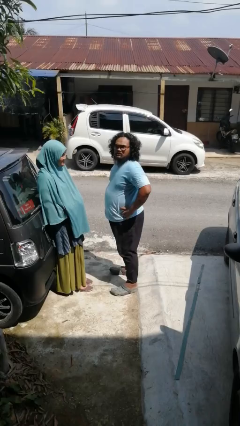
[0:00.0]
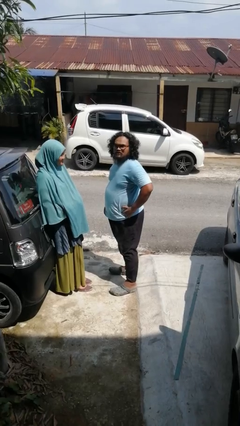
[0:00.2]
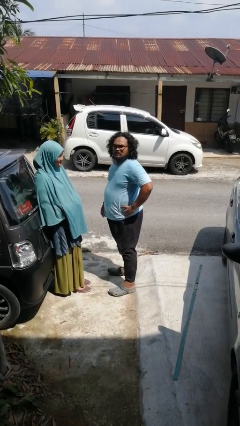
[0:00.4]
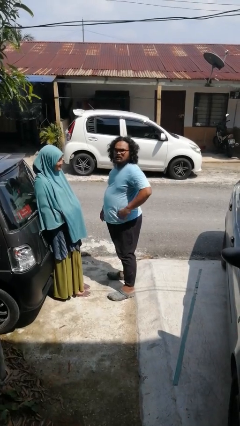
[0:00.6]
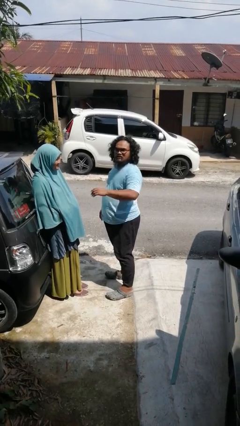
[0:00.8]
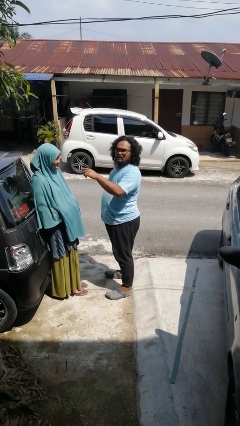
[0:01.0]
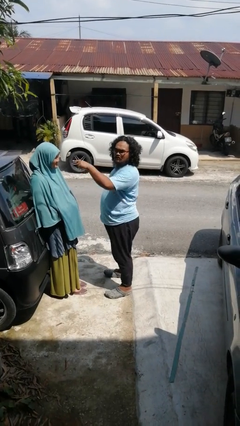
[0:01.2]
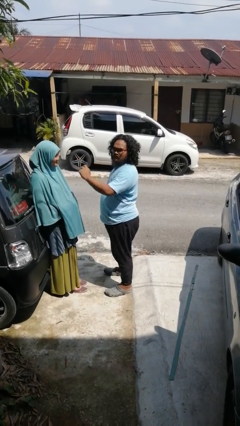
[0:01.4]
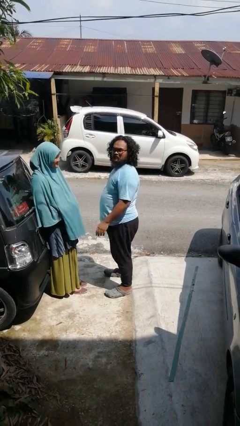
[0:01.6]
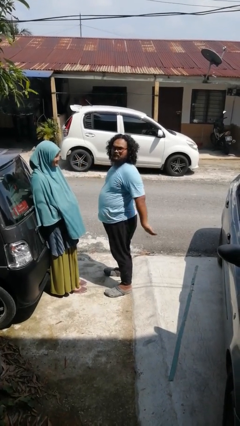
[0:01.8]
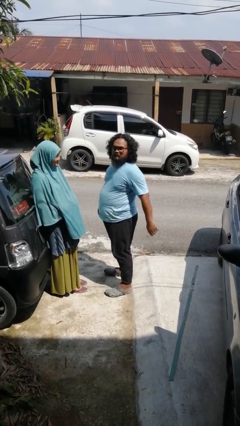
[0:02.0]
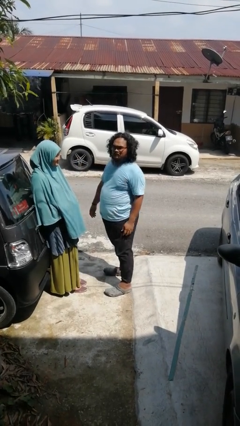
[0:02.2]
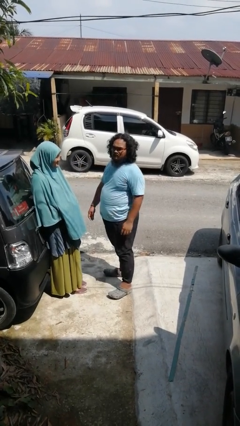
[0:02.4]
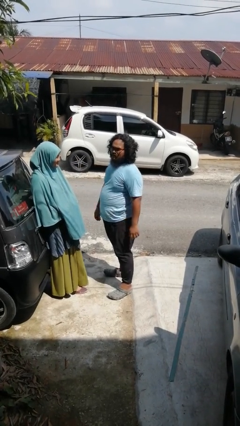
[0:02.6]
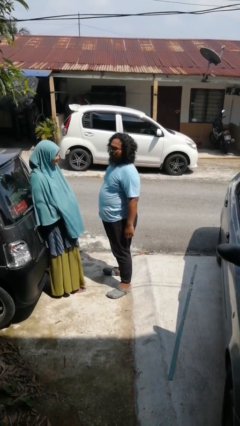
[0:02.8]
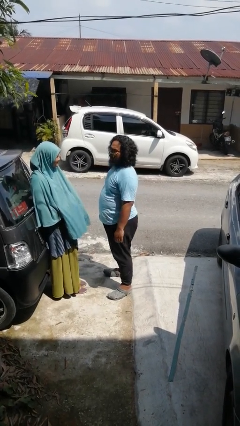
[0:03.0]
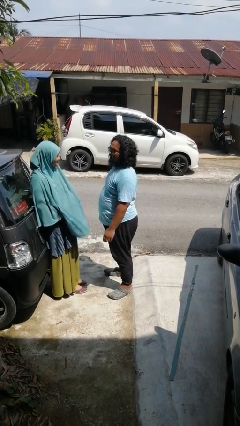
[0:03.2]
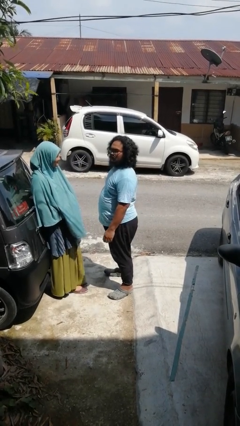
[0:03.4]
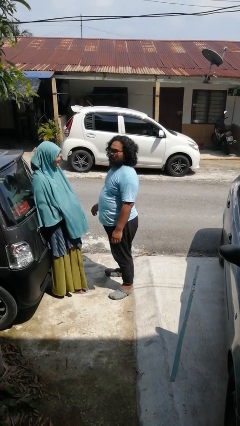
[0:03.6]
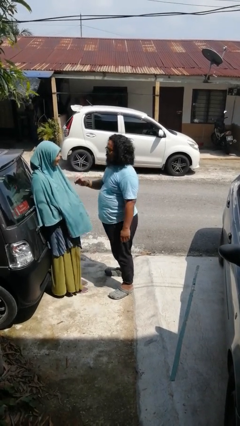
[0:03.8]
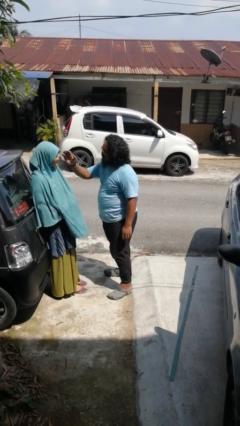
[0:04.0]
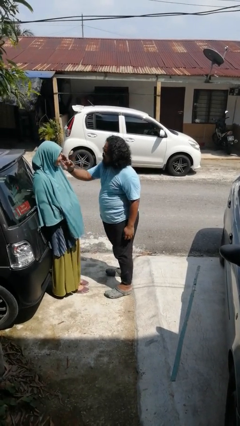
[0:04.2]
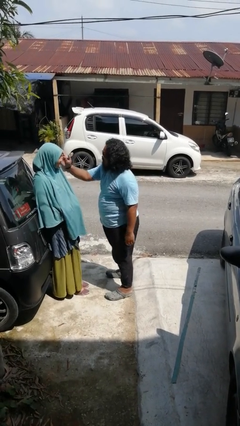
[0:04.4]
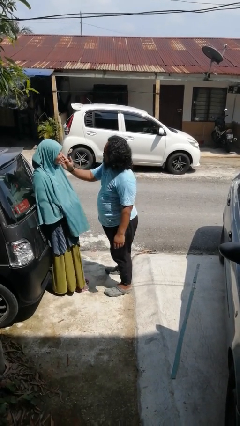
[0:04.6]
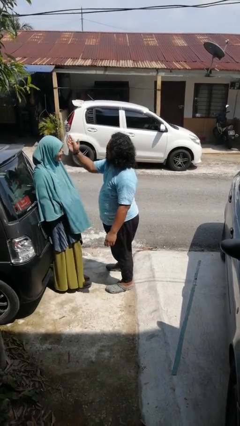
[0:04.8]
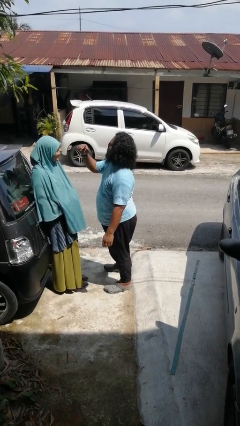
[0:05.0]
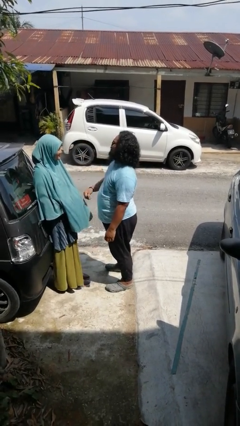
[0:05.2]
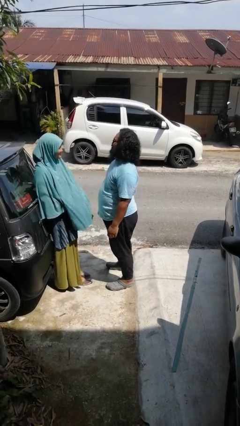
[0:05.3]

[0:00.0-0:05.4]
person touches face of person

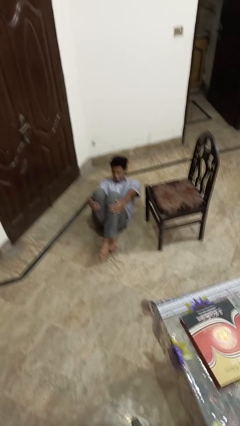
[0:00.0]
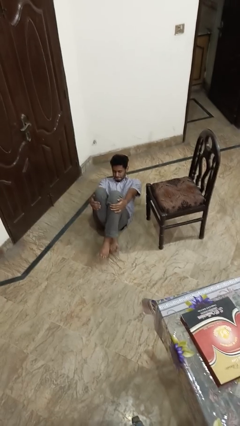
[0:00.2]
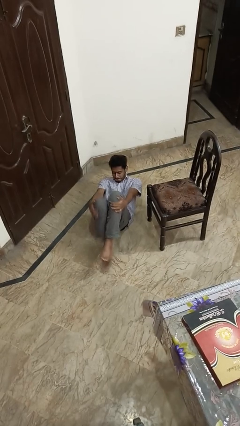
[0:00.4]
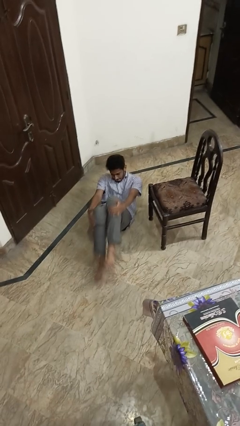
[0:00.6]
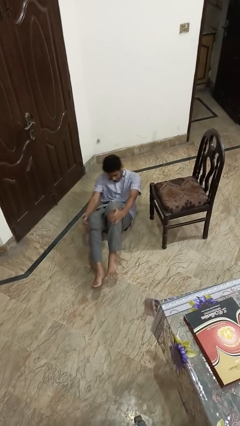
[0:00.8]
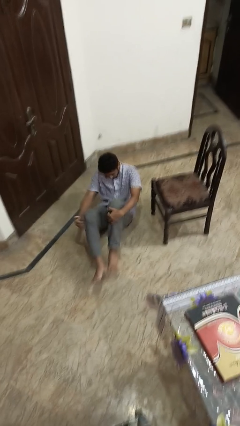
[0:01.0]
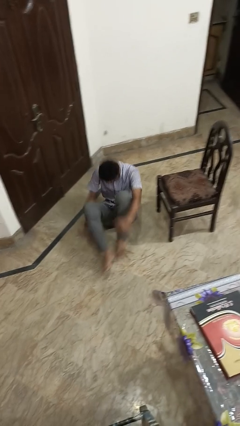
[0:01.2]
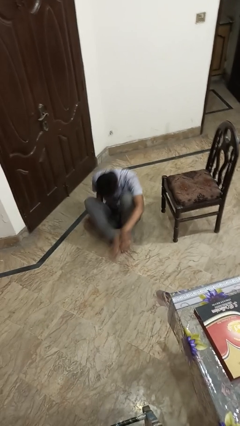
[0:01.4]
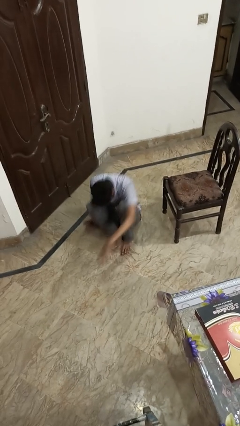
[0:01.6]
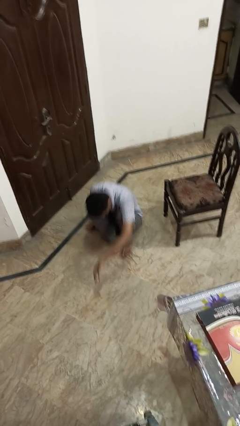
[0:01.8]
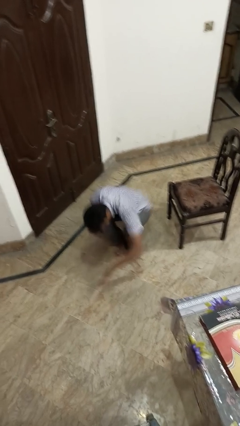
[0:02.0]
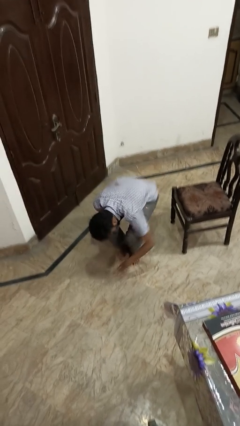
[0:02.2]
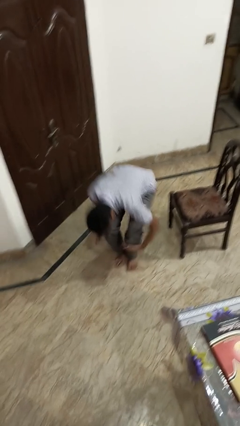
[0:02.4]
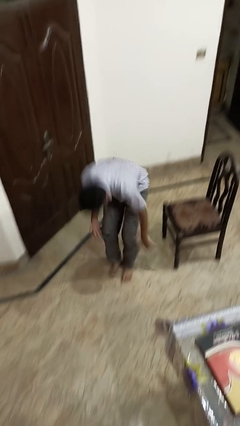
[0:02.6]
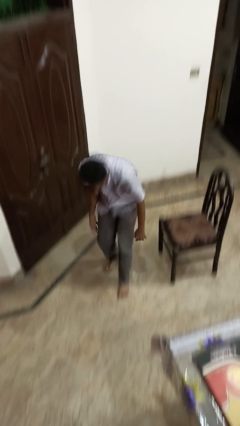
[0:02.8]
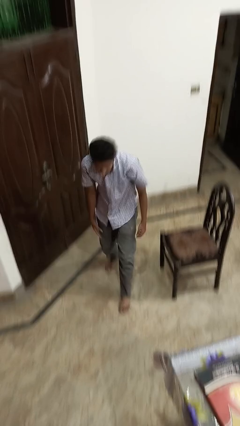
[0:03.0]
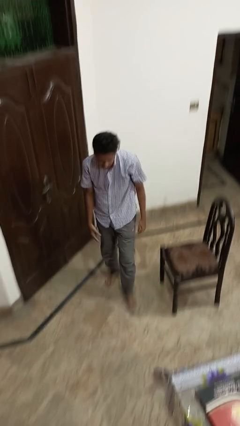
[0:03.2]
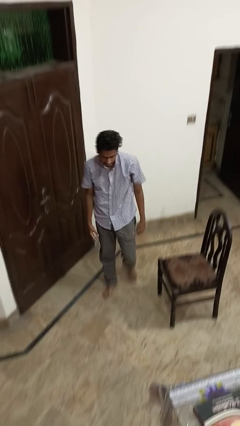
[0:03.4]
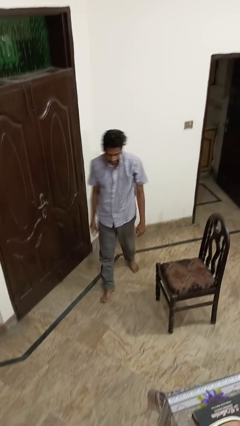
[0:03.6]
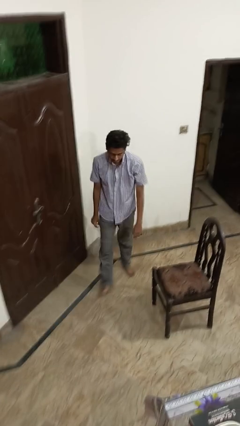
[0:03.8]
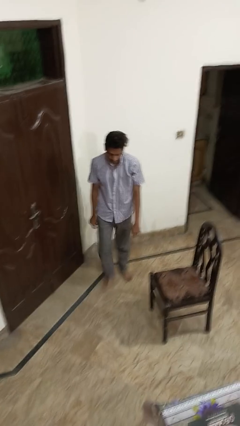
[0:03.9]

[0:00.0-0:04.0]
person stands up from floor

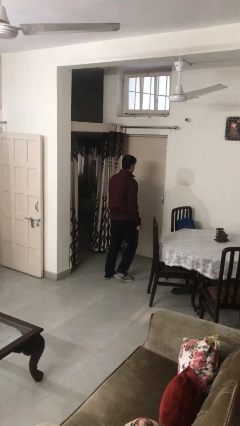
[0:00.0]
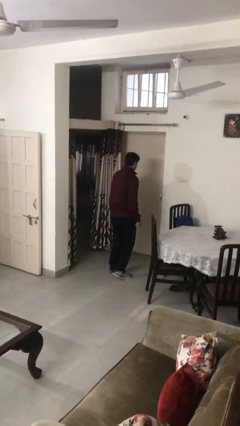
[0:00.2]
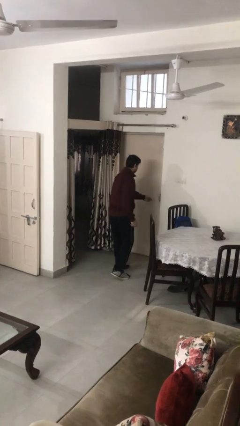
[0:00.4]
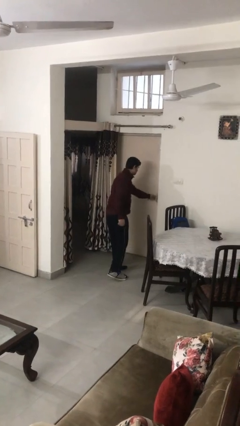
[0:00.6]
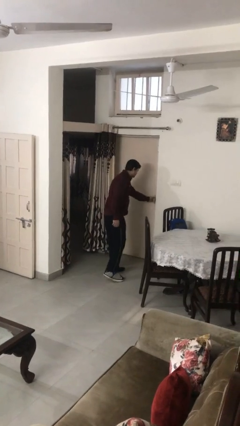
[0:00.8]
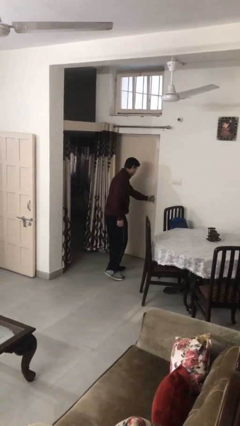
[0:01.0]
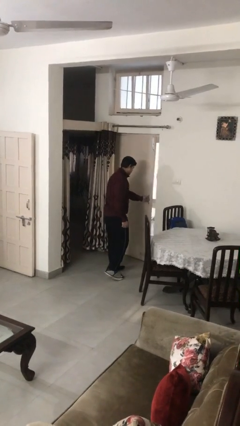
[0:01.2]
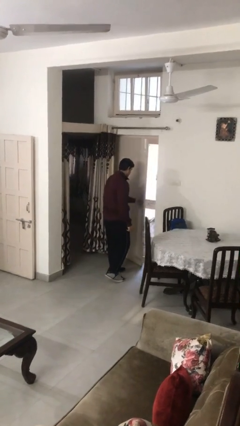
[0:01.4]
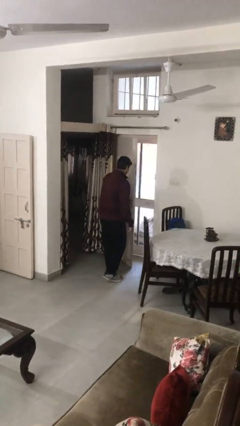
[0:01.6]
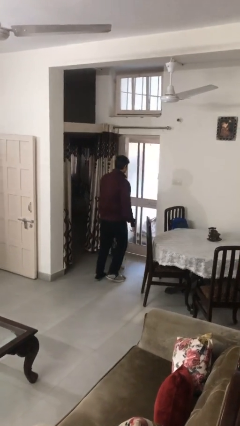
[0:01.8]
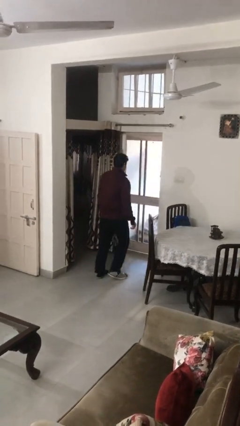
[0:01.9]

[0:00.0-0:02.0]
person opens facility door

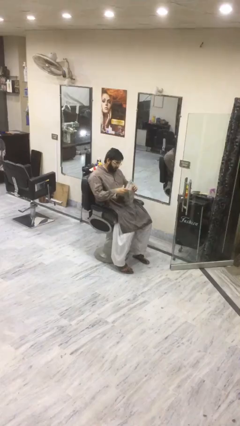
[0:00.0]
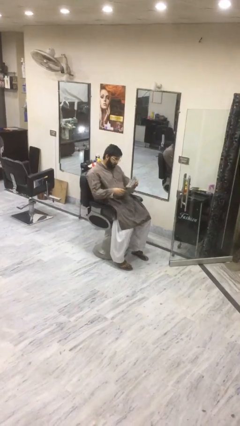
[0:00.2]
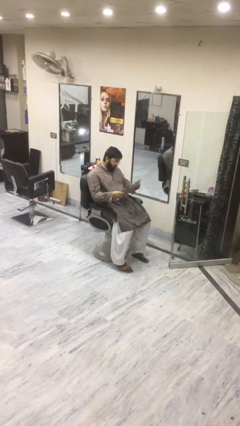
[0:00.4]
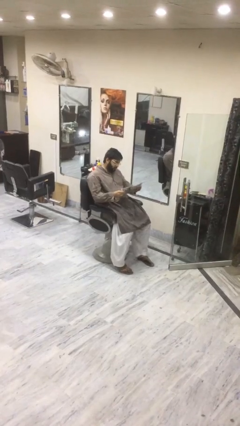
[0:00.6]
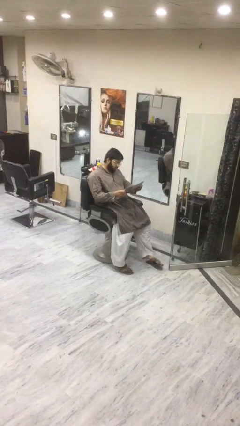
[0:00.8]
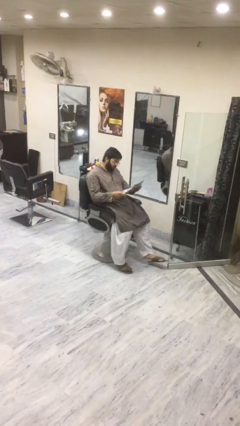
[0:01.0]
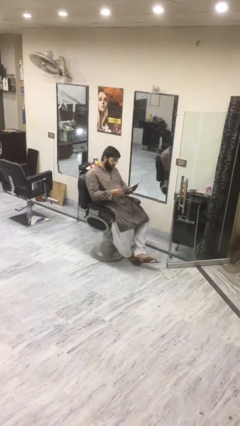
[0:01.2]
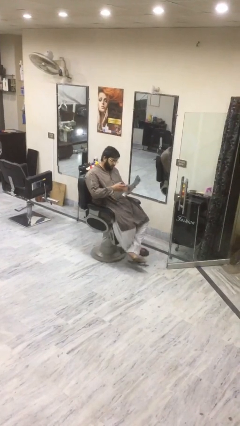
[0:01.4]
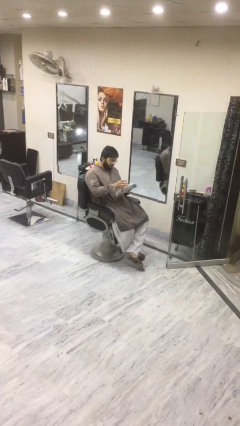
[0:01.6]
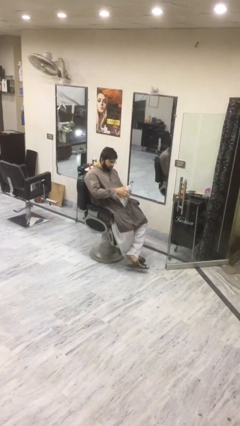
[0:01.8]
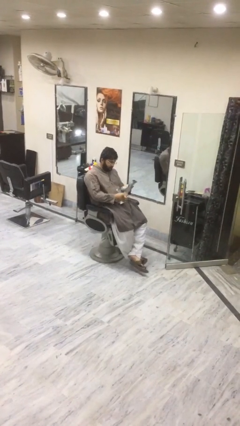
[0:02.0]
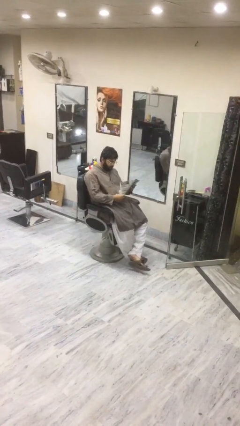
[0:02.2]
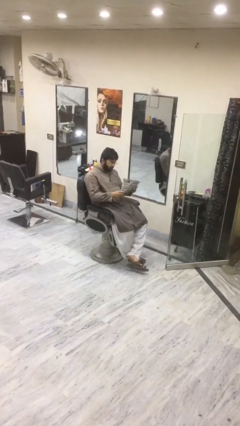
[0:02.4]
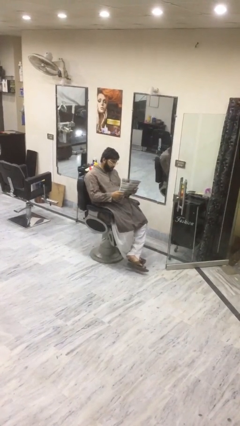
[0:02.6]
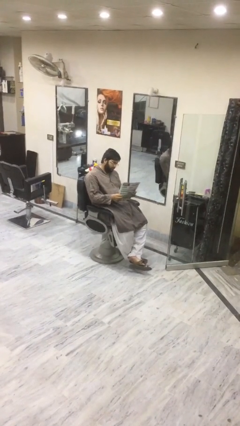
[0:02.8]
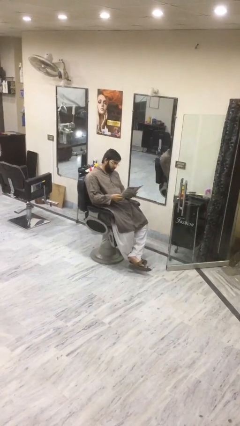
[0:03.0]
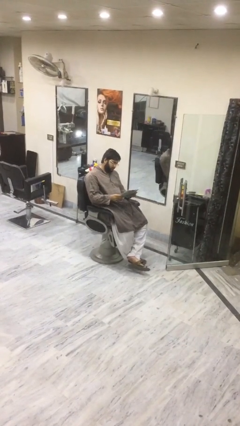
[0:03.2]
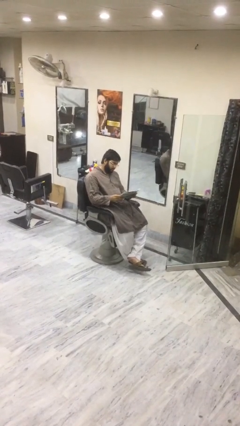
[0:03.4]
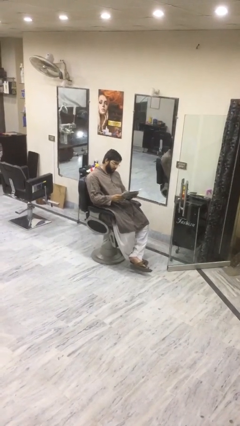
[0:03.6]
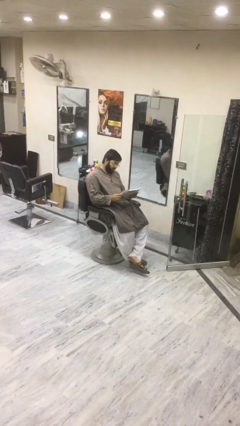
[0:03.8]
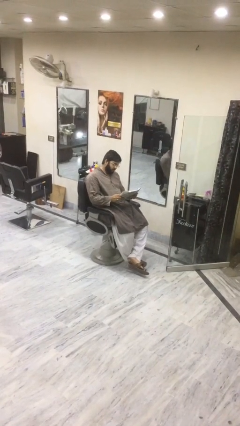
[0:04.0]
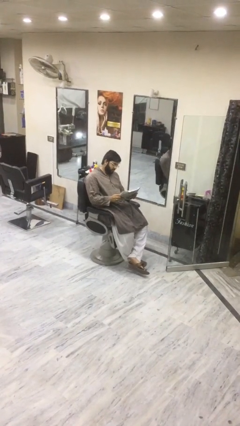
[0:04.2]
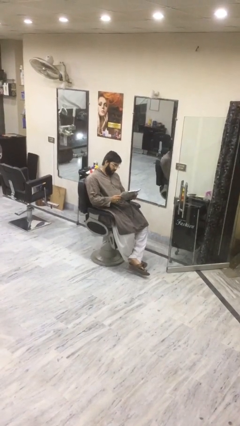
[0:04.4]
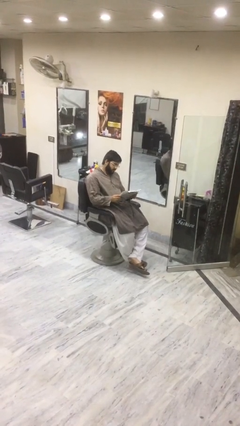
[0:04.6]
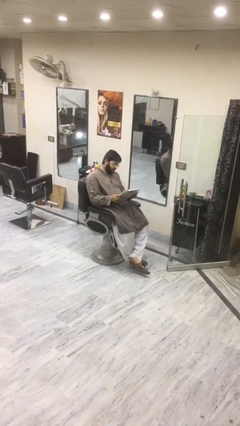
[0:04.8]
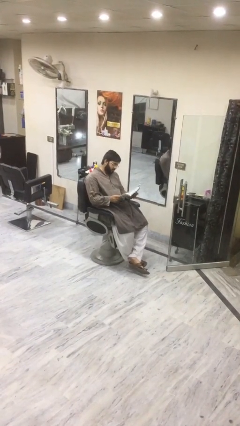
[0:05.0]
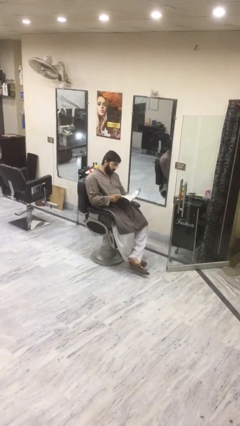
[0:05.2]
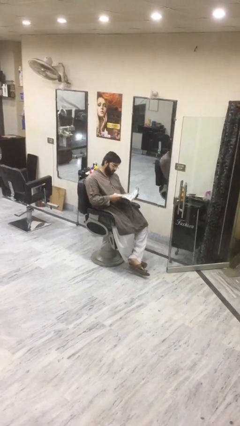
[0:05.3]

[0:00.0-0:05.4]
person reads document

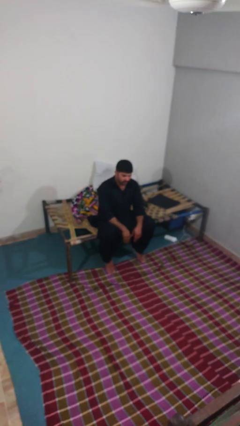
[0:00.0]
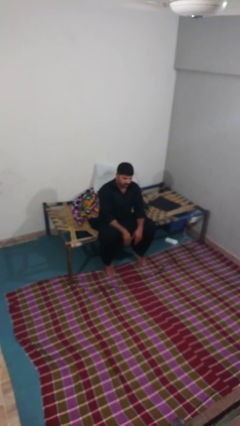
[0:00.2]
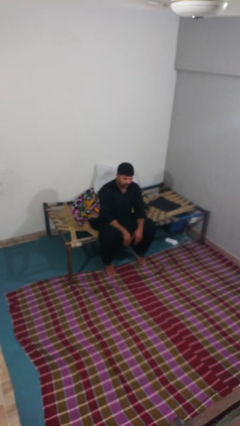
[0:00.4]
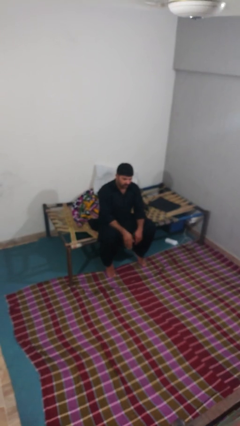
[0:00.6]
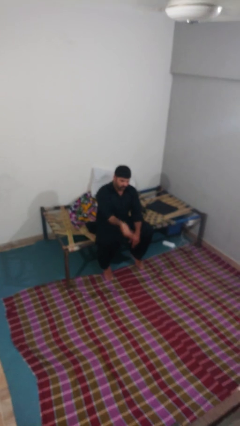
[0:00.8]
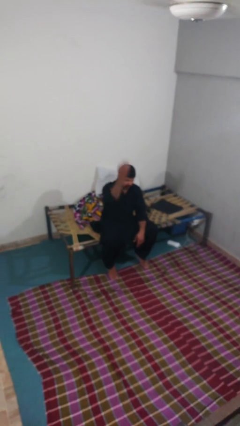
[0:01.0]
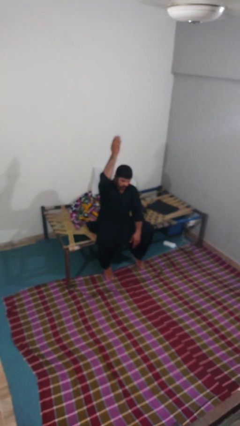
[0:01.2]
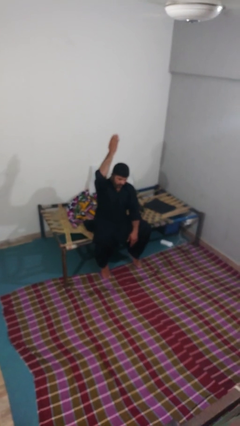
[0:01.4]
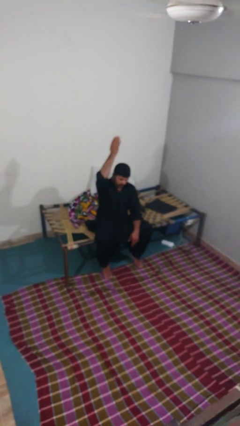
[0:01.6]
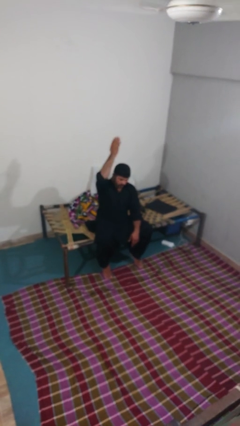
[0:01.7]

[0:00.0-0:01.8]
person gestures swipe up
